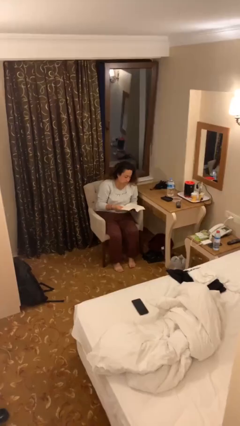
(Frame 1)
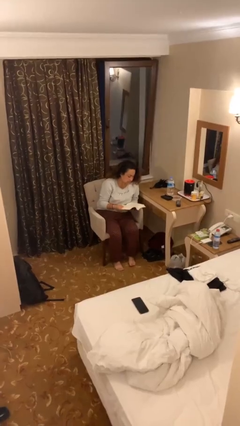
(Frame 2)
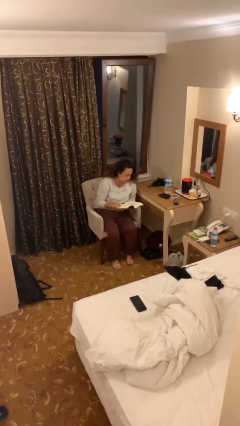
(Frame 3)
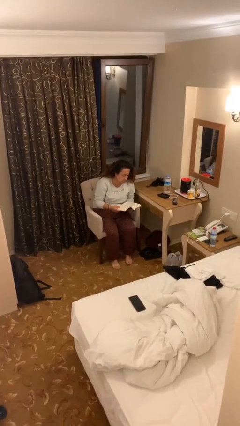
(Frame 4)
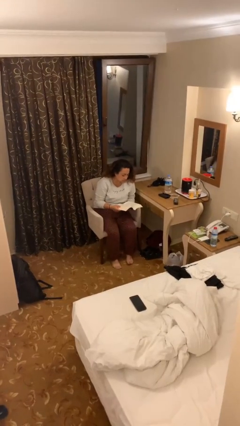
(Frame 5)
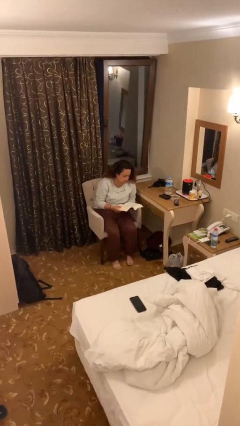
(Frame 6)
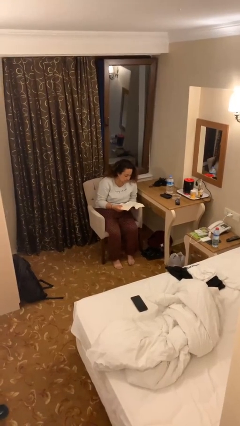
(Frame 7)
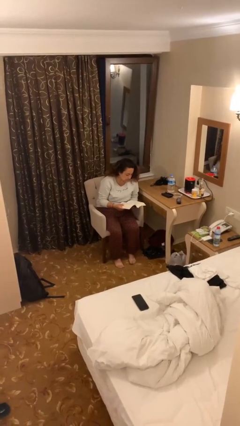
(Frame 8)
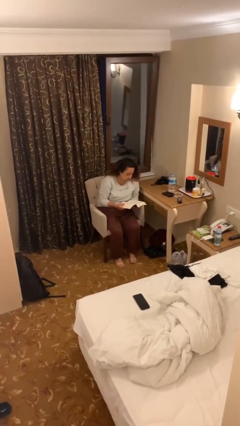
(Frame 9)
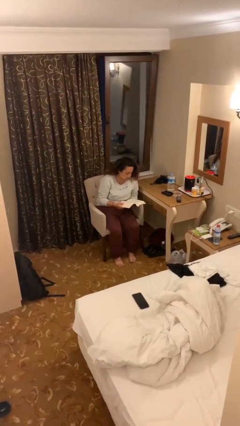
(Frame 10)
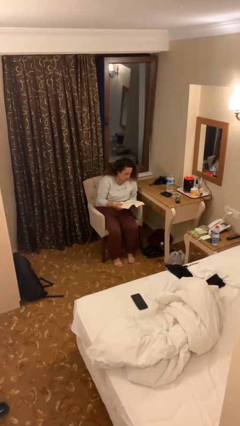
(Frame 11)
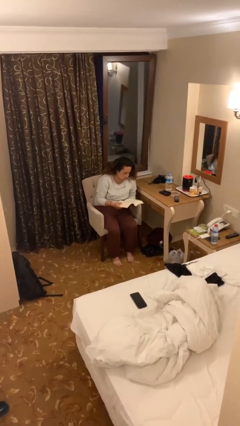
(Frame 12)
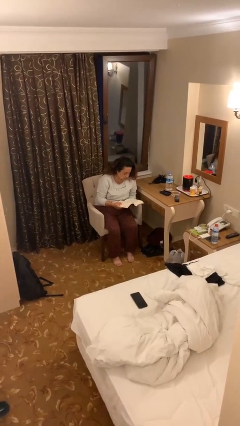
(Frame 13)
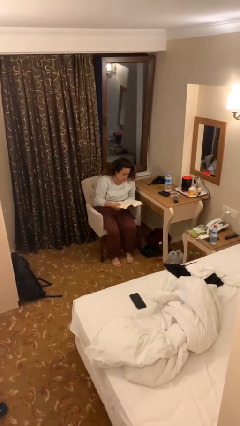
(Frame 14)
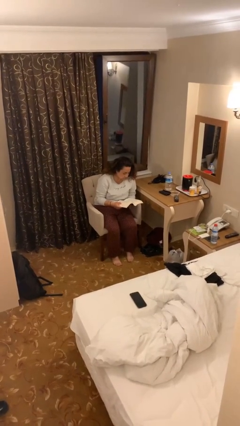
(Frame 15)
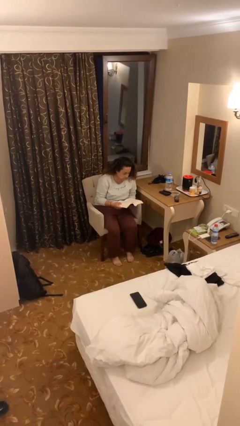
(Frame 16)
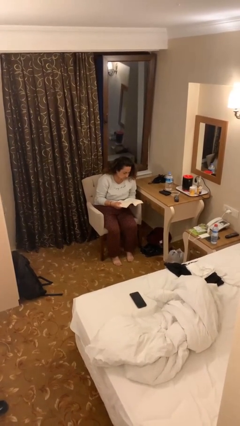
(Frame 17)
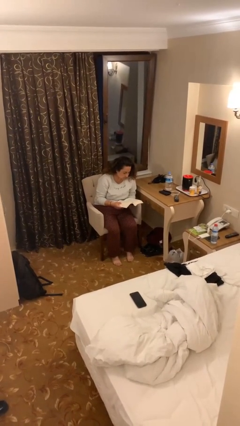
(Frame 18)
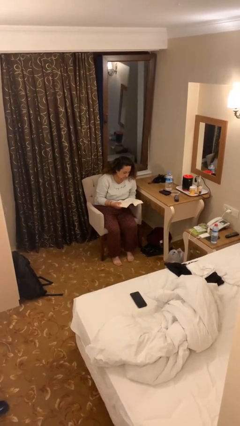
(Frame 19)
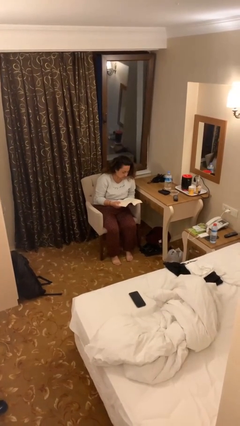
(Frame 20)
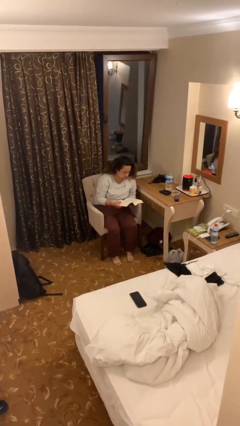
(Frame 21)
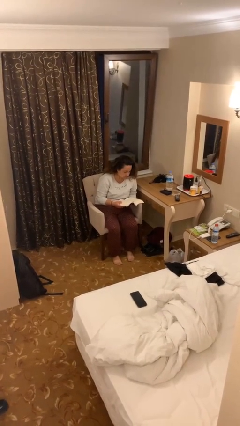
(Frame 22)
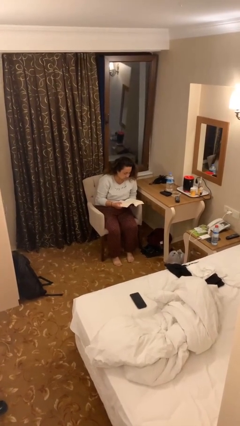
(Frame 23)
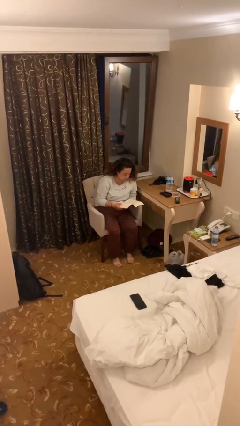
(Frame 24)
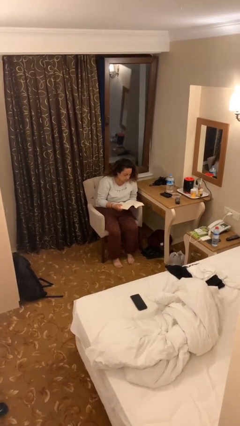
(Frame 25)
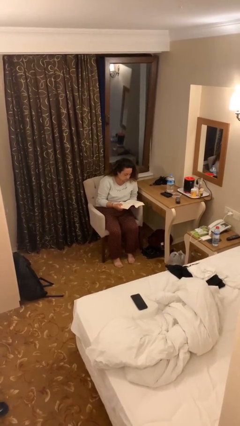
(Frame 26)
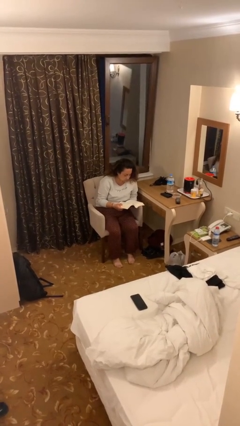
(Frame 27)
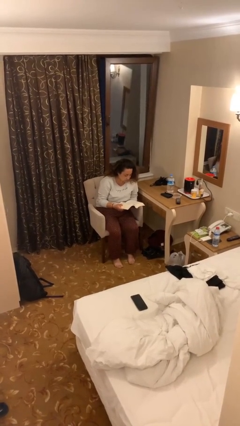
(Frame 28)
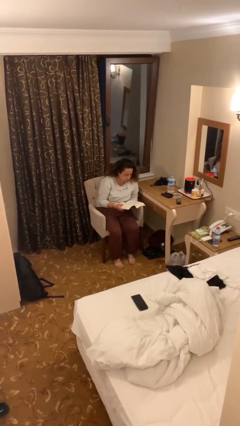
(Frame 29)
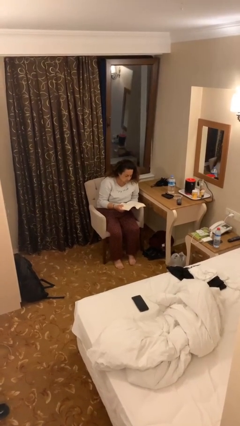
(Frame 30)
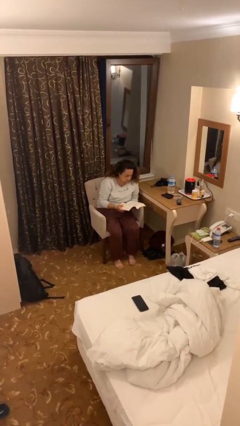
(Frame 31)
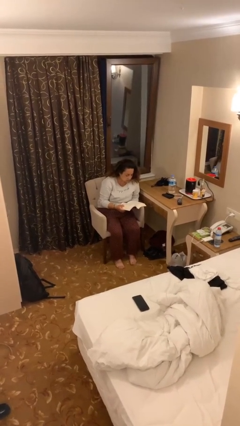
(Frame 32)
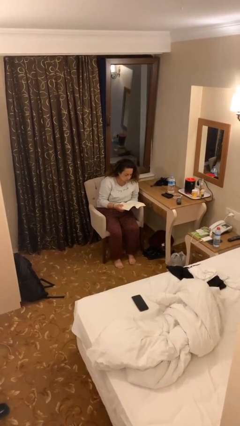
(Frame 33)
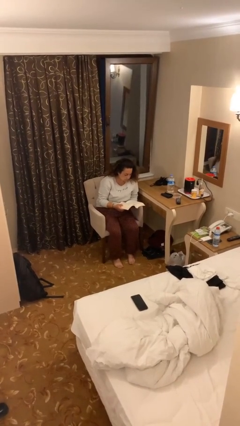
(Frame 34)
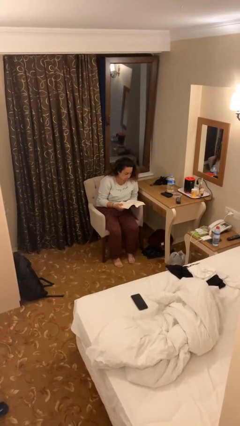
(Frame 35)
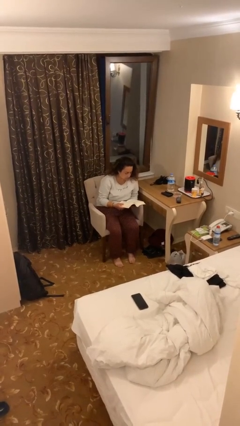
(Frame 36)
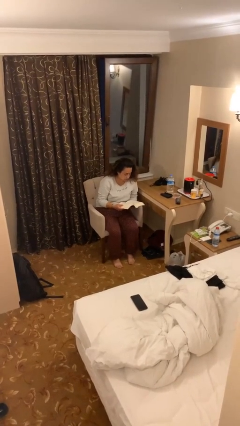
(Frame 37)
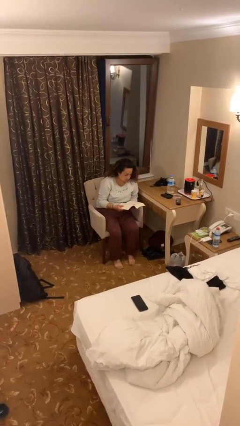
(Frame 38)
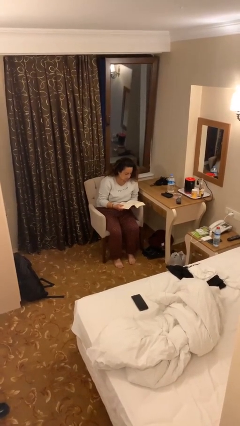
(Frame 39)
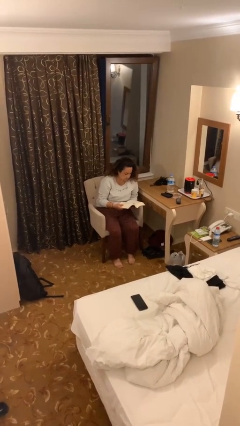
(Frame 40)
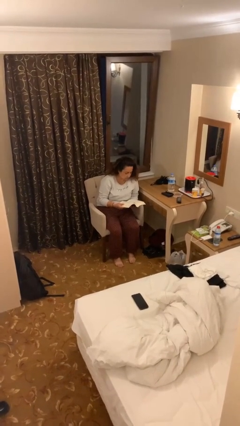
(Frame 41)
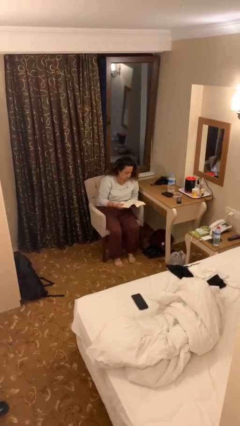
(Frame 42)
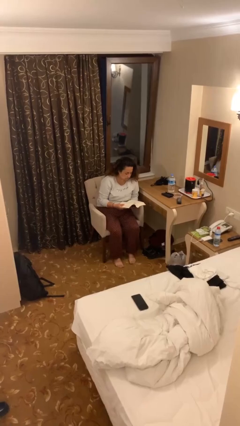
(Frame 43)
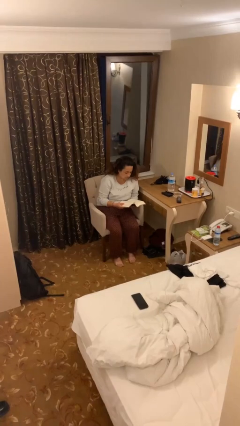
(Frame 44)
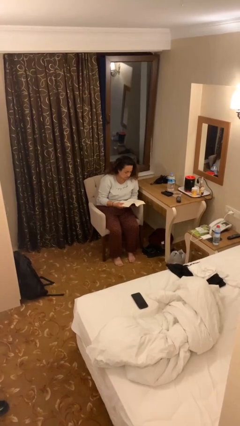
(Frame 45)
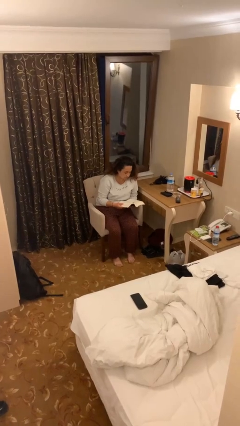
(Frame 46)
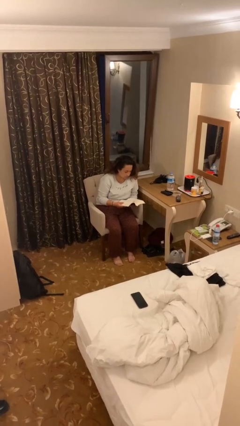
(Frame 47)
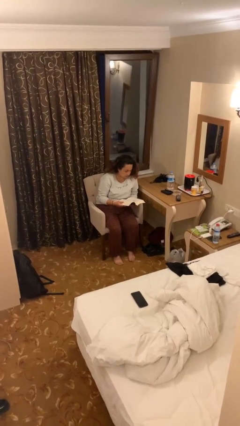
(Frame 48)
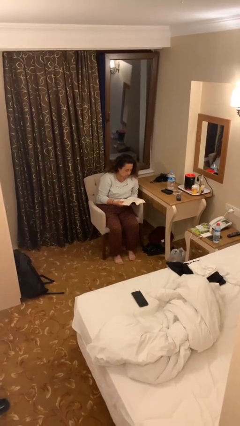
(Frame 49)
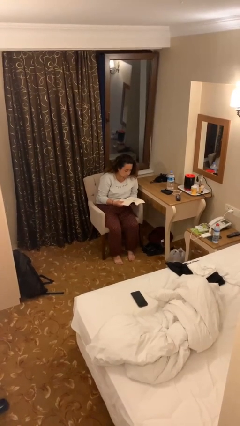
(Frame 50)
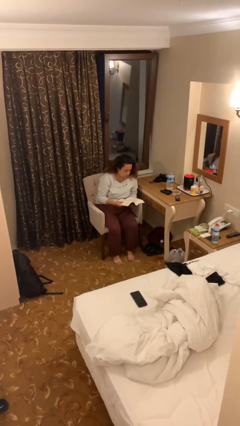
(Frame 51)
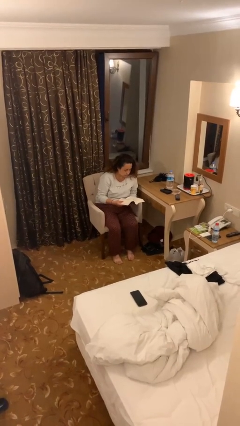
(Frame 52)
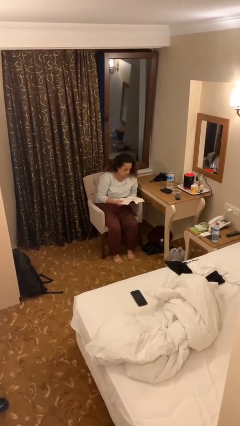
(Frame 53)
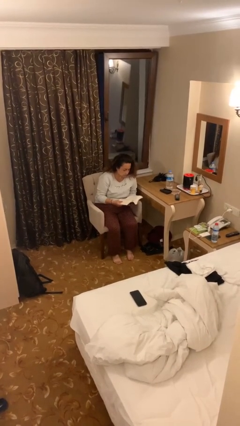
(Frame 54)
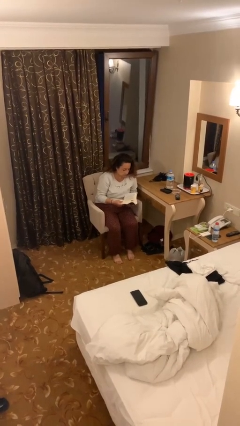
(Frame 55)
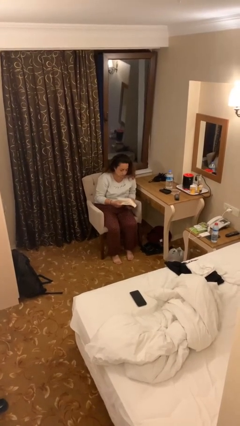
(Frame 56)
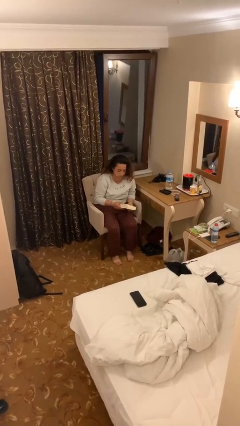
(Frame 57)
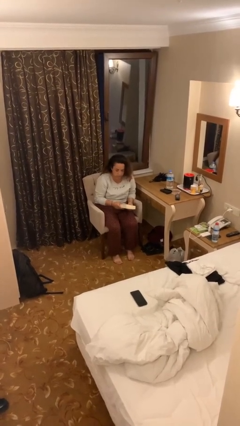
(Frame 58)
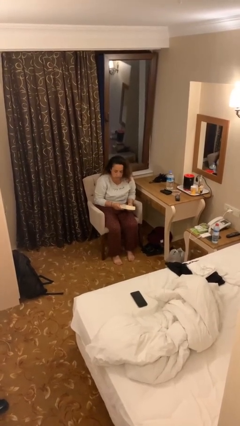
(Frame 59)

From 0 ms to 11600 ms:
person reads document

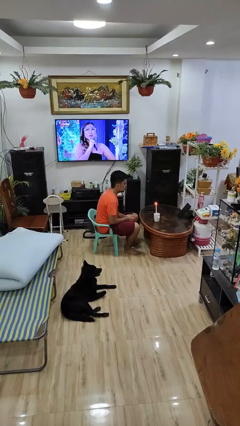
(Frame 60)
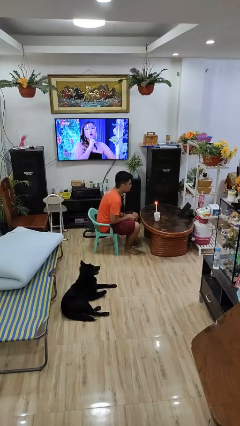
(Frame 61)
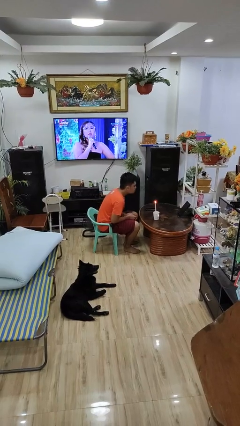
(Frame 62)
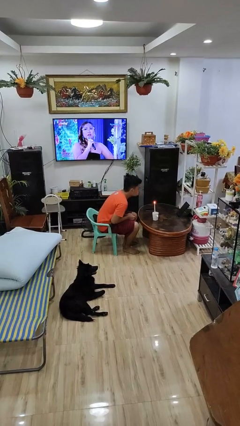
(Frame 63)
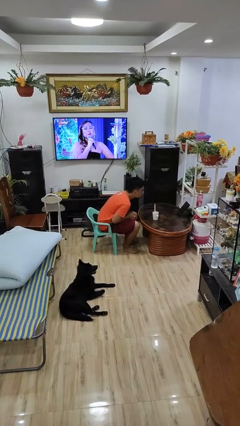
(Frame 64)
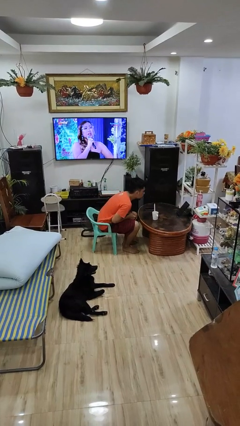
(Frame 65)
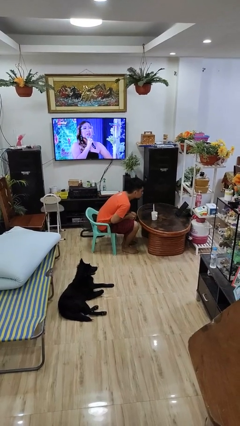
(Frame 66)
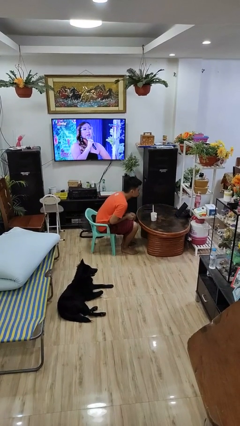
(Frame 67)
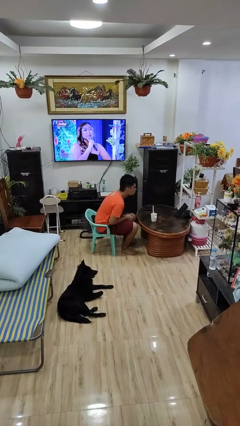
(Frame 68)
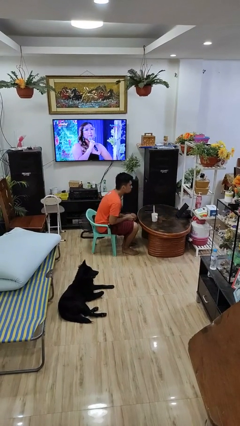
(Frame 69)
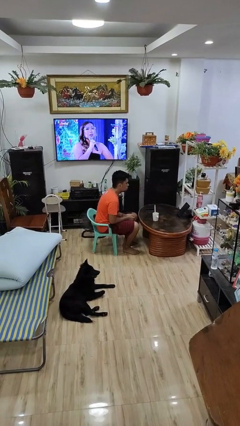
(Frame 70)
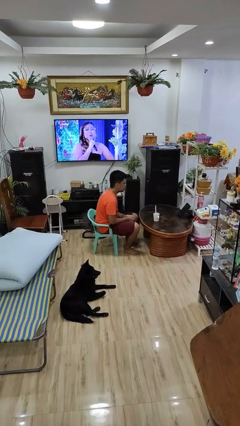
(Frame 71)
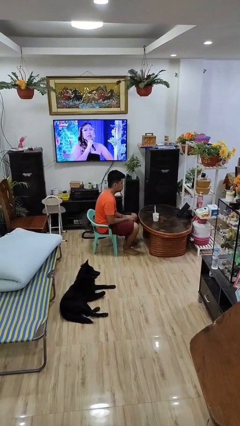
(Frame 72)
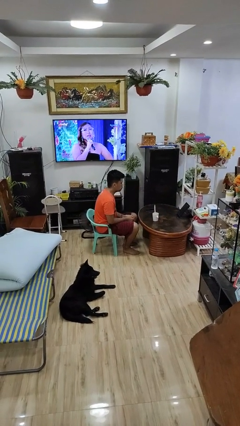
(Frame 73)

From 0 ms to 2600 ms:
person extinguishes candle

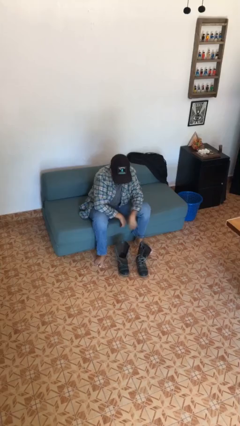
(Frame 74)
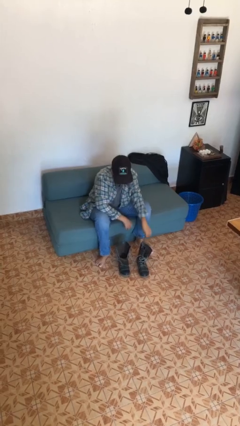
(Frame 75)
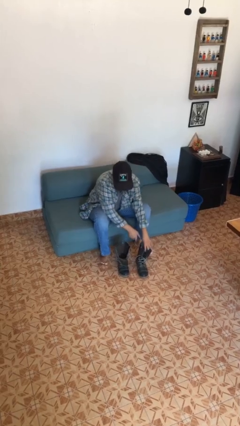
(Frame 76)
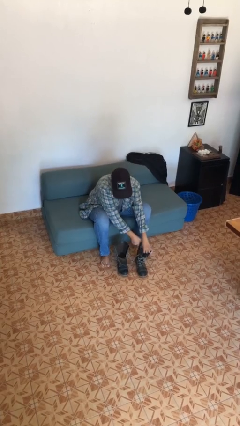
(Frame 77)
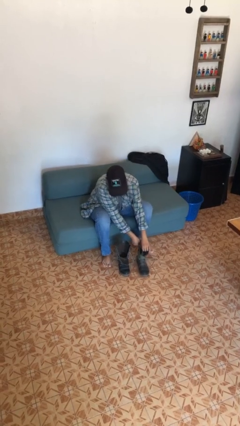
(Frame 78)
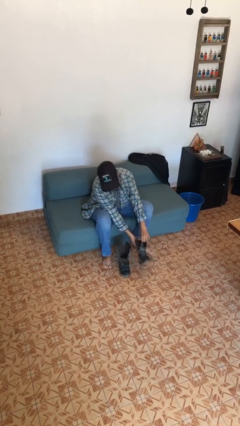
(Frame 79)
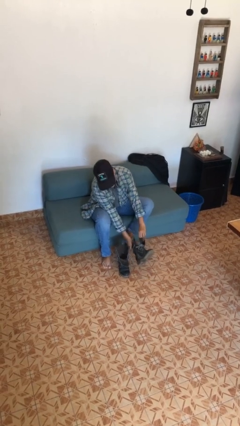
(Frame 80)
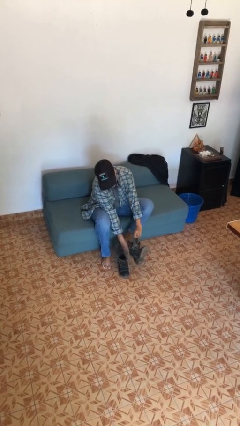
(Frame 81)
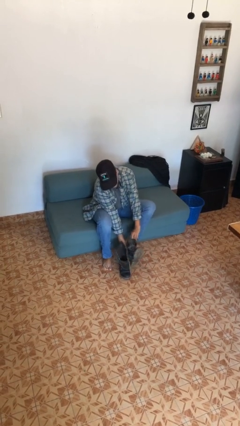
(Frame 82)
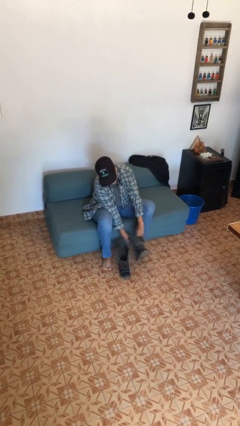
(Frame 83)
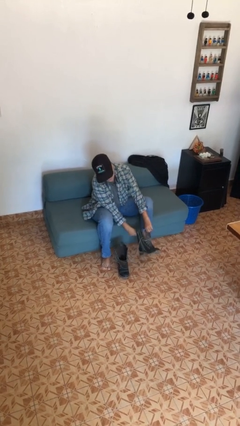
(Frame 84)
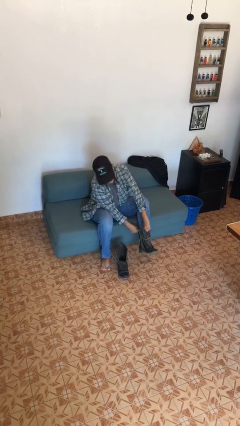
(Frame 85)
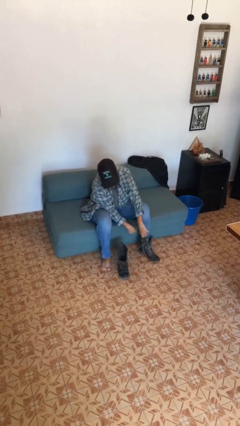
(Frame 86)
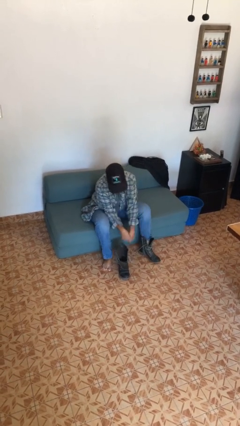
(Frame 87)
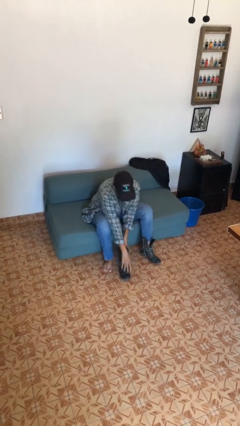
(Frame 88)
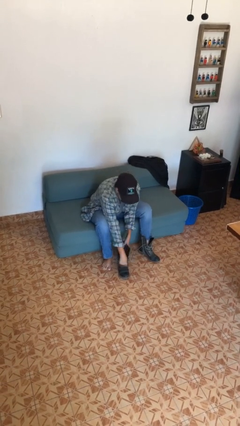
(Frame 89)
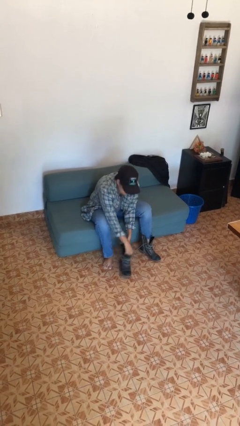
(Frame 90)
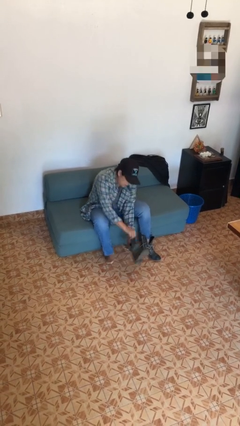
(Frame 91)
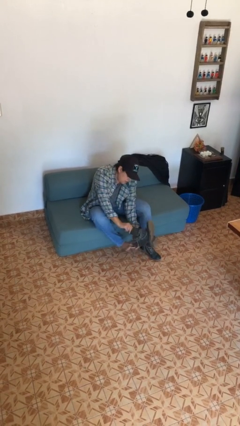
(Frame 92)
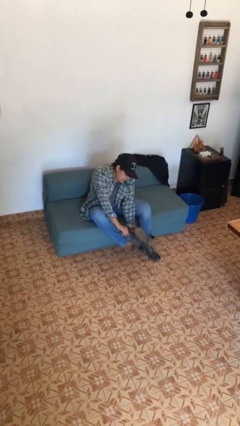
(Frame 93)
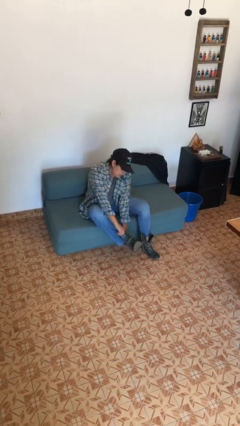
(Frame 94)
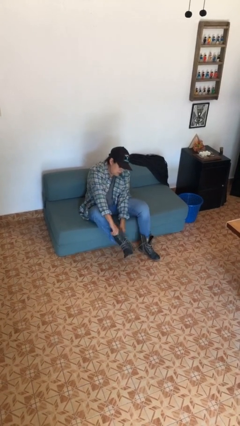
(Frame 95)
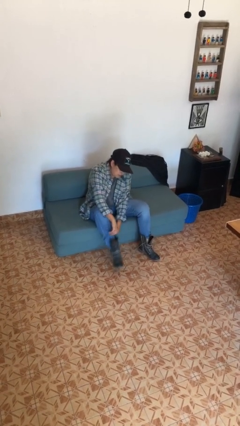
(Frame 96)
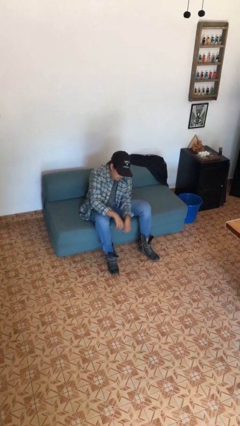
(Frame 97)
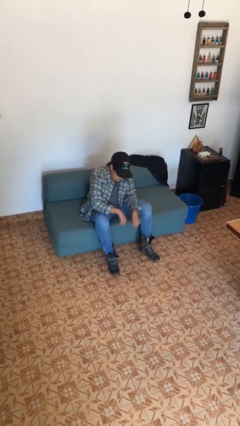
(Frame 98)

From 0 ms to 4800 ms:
person puts on boots
